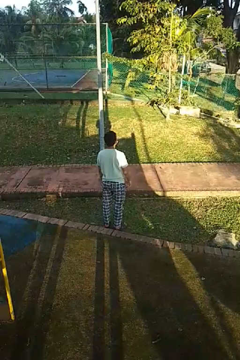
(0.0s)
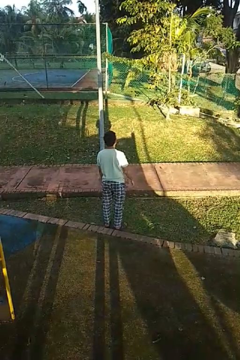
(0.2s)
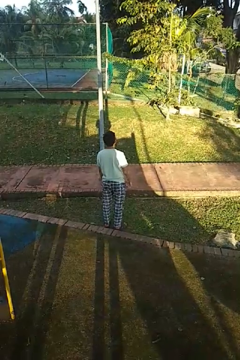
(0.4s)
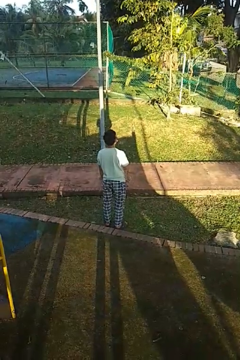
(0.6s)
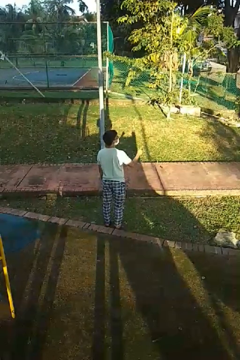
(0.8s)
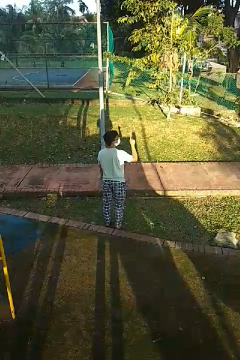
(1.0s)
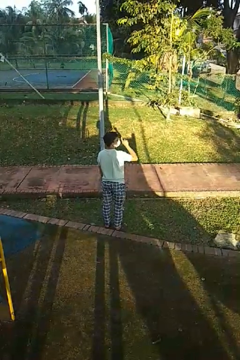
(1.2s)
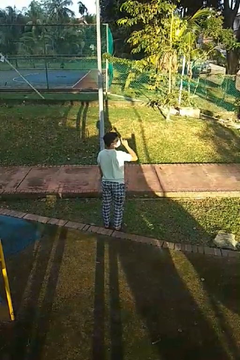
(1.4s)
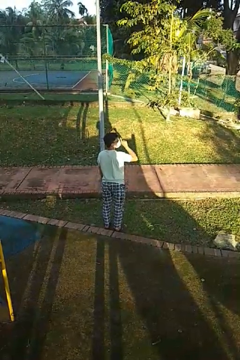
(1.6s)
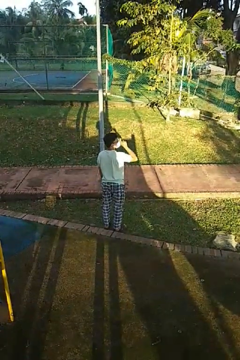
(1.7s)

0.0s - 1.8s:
person gestures be quiet

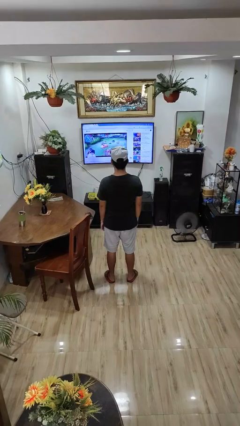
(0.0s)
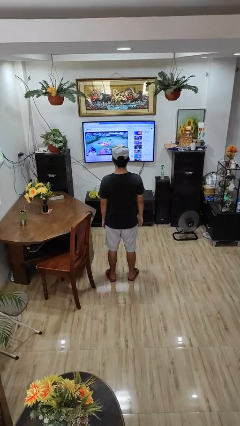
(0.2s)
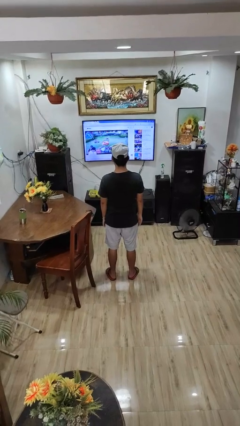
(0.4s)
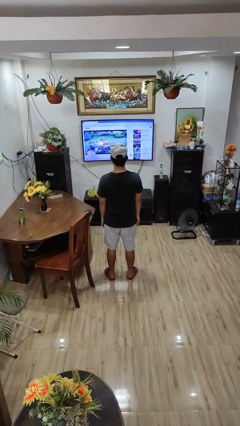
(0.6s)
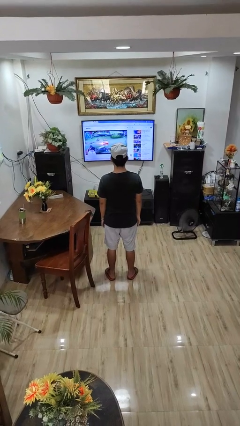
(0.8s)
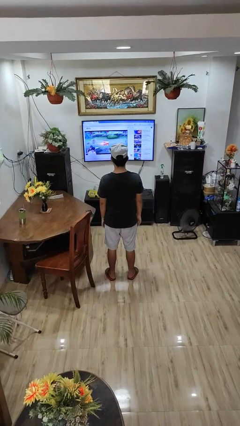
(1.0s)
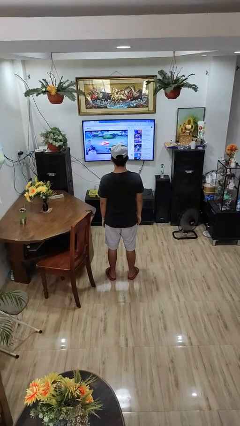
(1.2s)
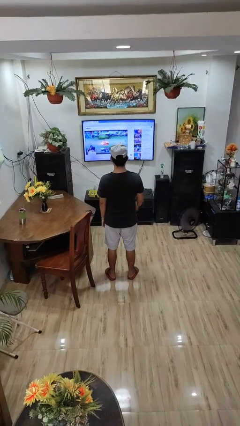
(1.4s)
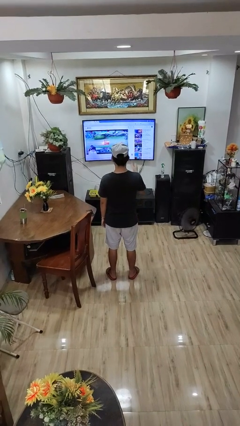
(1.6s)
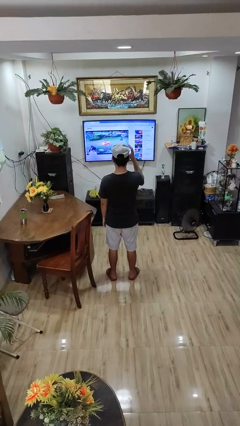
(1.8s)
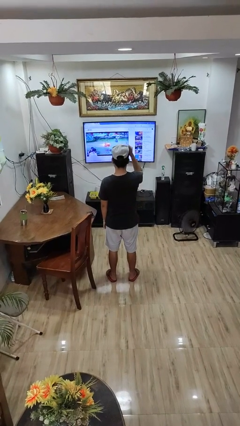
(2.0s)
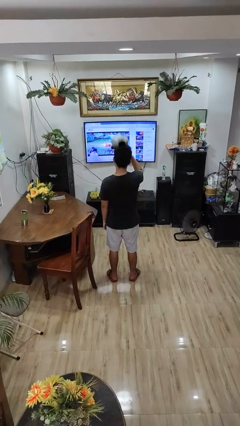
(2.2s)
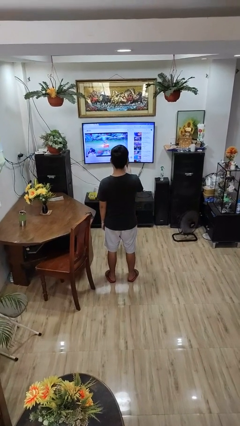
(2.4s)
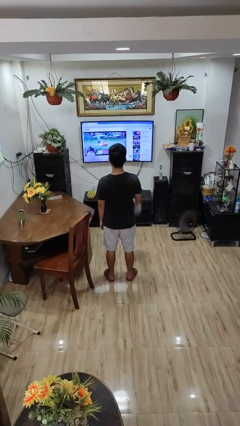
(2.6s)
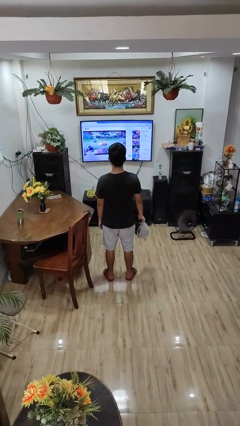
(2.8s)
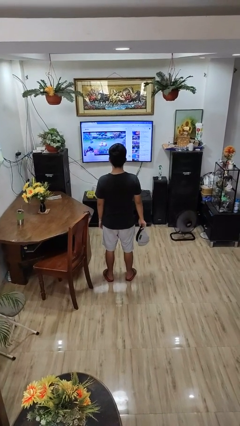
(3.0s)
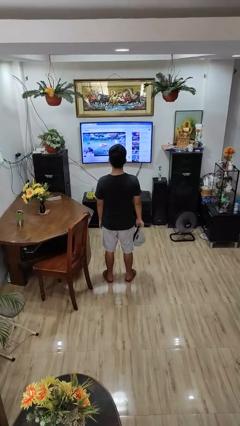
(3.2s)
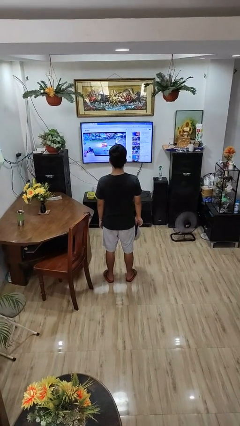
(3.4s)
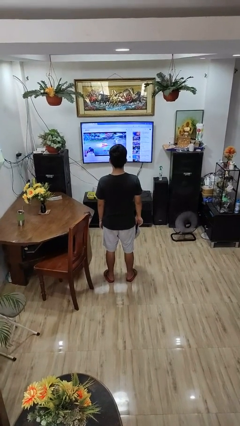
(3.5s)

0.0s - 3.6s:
person sweeps floor

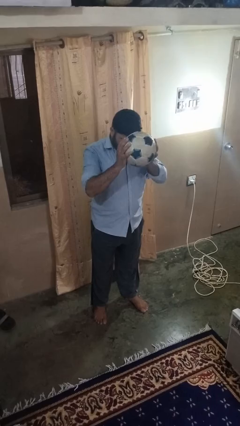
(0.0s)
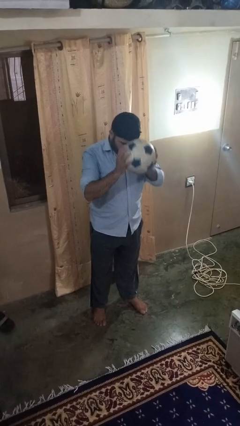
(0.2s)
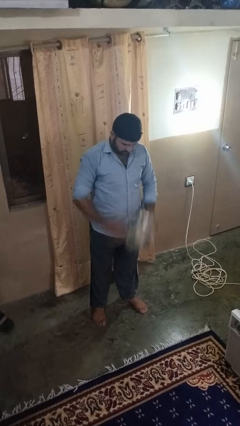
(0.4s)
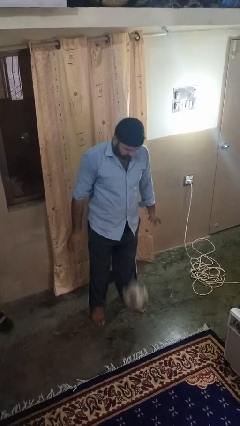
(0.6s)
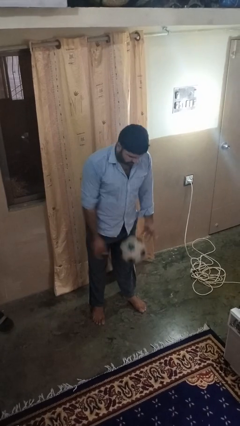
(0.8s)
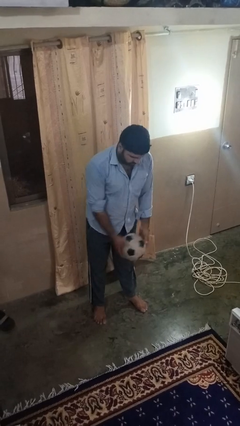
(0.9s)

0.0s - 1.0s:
person bounces ball on floor

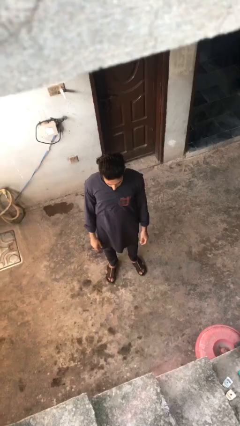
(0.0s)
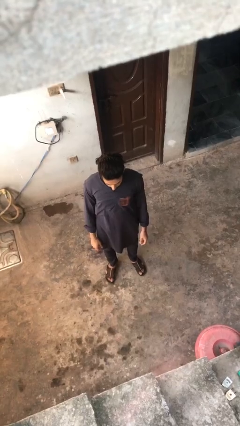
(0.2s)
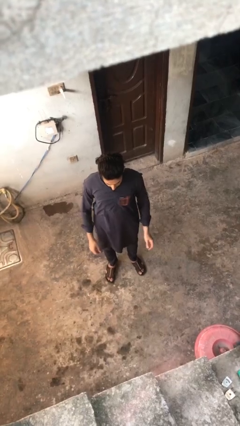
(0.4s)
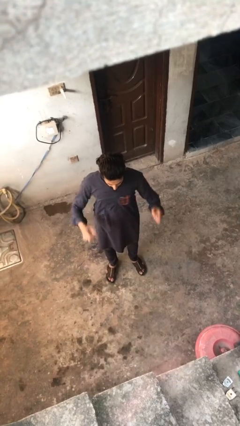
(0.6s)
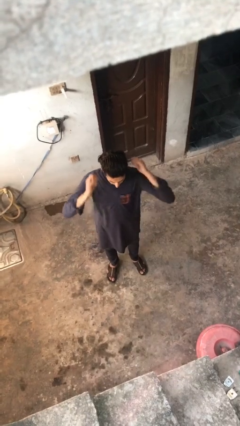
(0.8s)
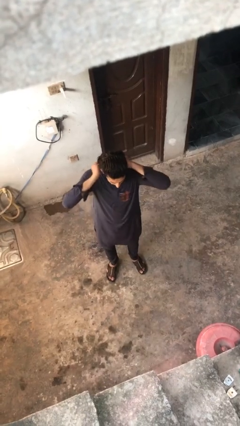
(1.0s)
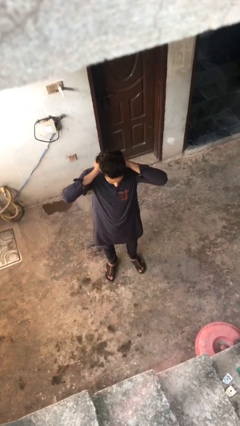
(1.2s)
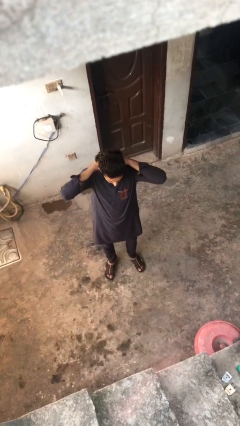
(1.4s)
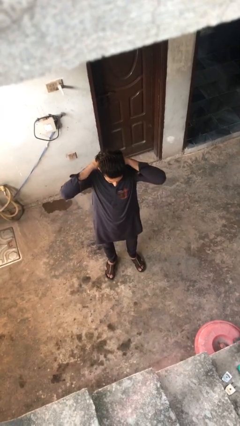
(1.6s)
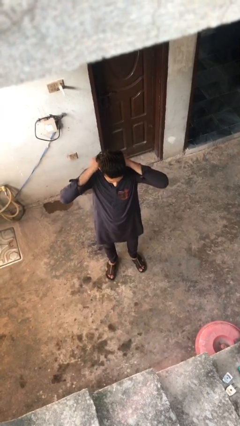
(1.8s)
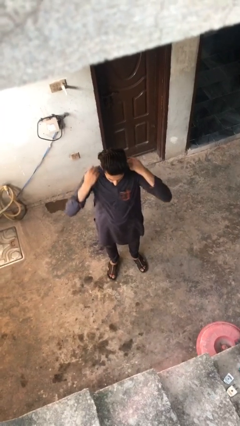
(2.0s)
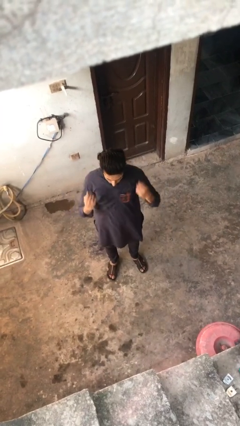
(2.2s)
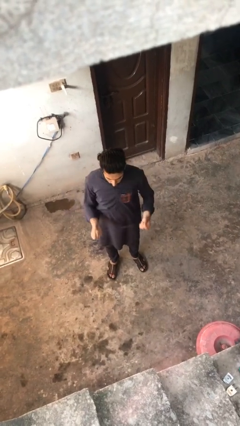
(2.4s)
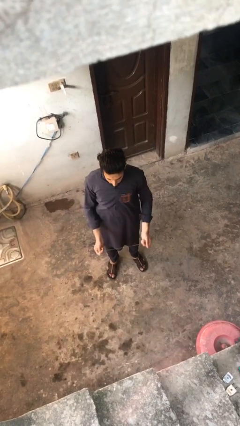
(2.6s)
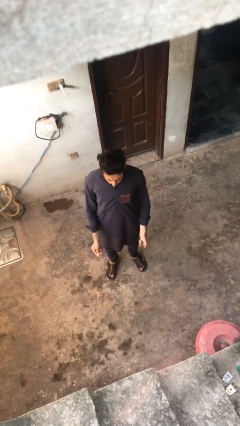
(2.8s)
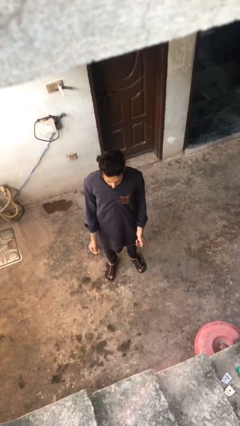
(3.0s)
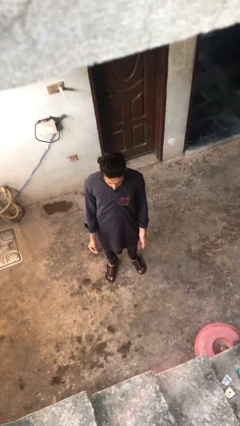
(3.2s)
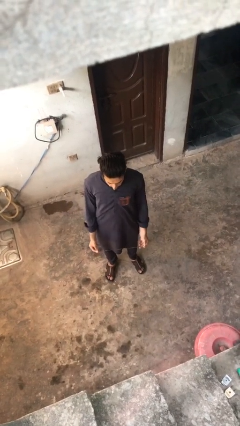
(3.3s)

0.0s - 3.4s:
person takes off necklace

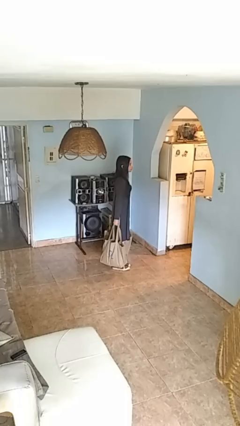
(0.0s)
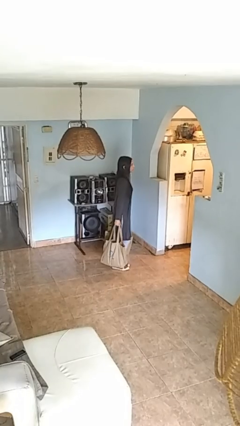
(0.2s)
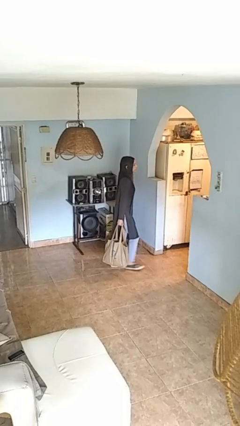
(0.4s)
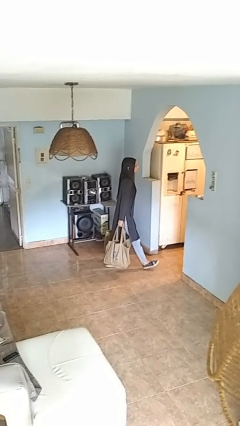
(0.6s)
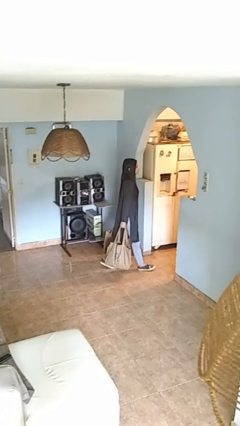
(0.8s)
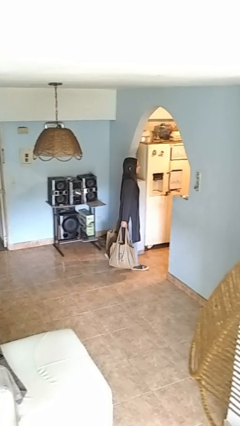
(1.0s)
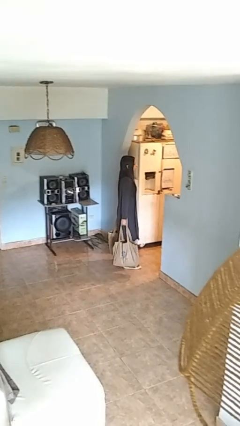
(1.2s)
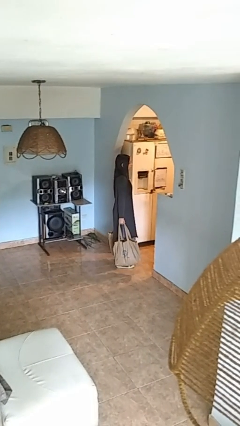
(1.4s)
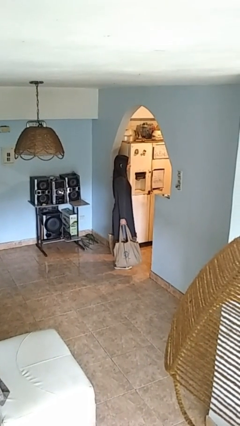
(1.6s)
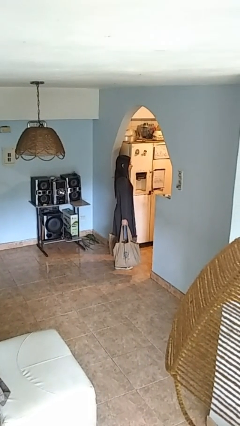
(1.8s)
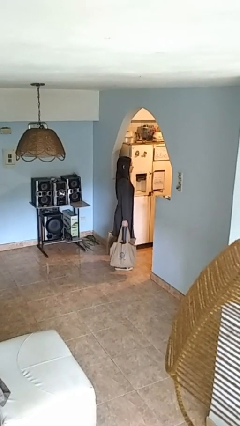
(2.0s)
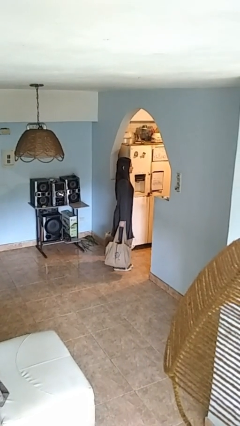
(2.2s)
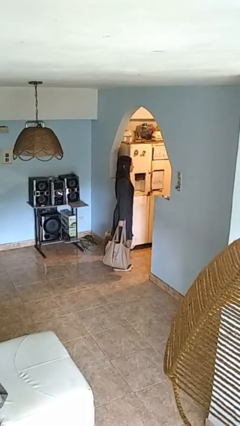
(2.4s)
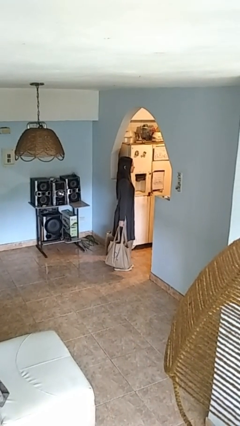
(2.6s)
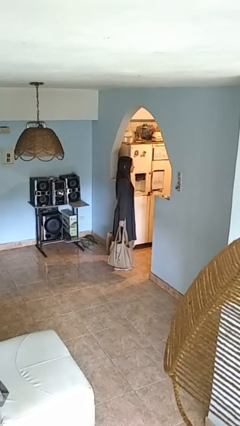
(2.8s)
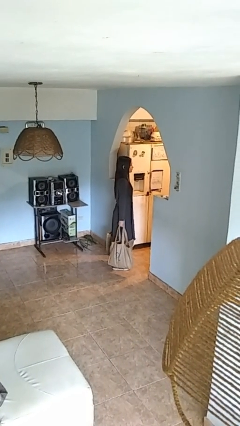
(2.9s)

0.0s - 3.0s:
person carries groceries

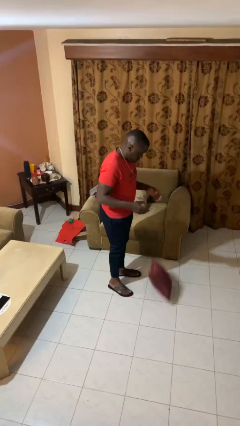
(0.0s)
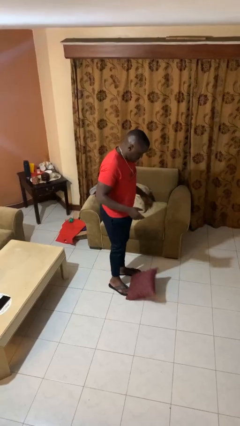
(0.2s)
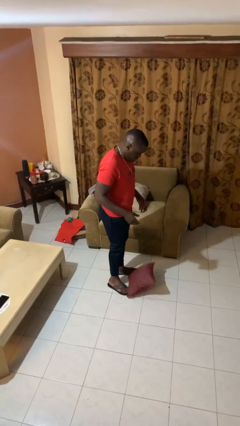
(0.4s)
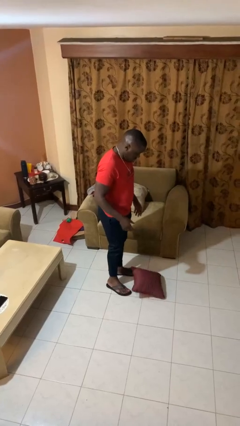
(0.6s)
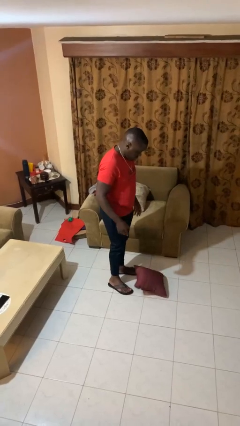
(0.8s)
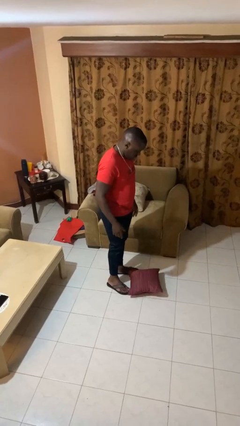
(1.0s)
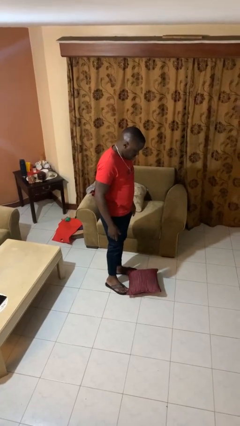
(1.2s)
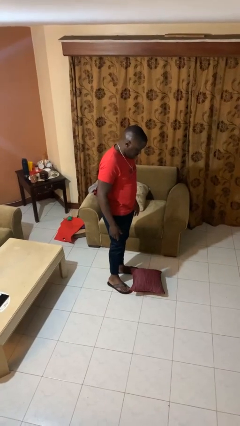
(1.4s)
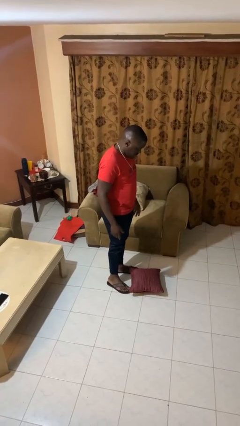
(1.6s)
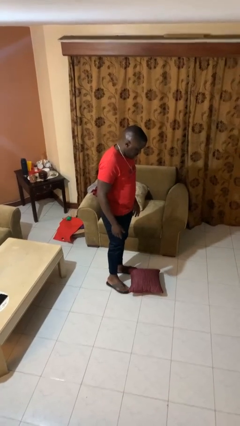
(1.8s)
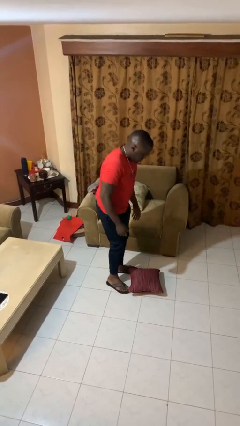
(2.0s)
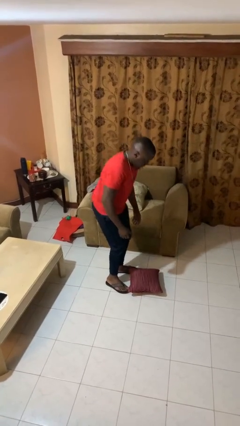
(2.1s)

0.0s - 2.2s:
person drops object

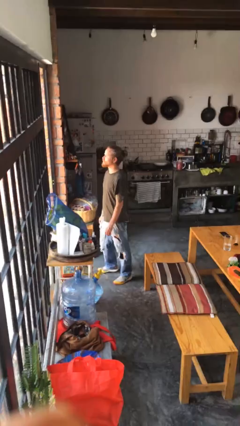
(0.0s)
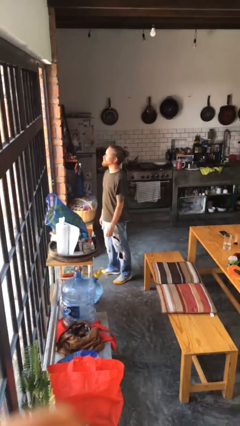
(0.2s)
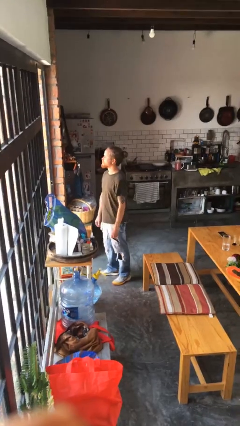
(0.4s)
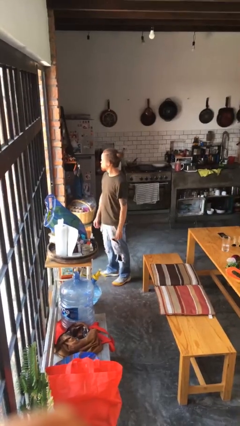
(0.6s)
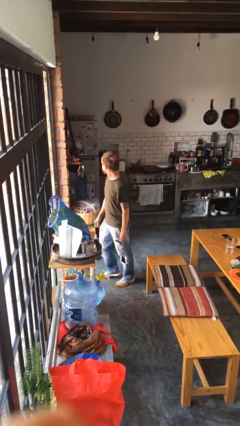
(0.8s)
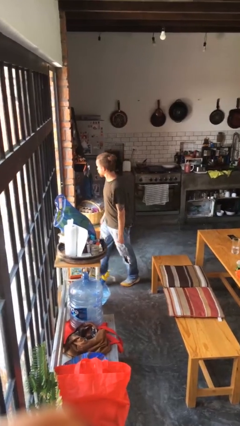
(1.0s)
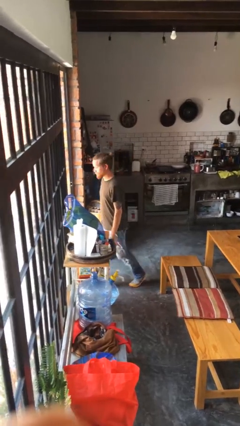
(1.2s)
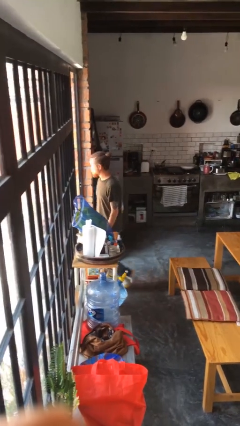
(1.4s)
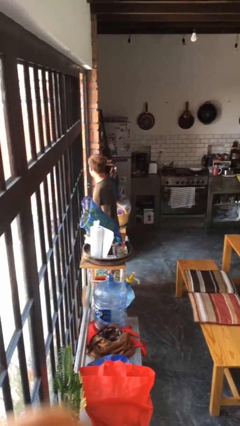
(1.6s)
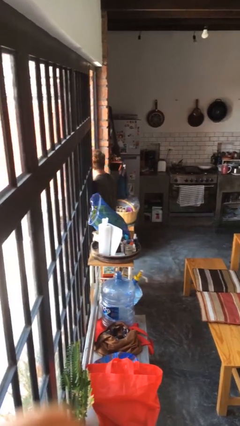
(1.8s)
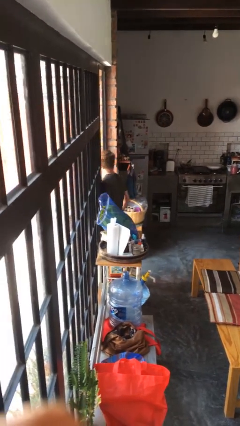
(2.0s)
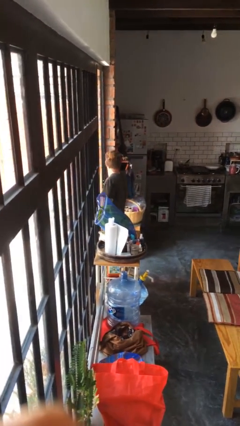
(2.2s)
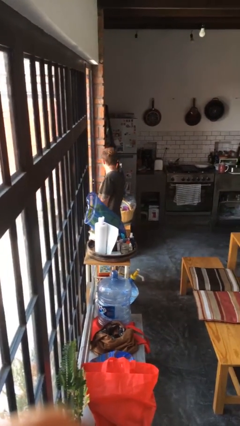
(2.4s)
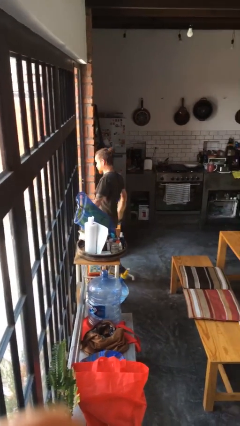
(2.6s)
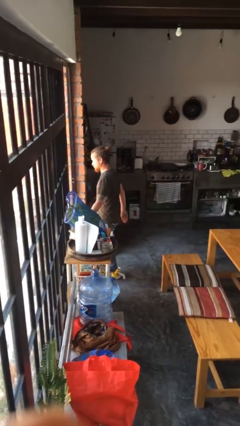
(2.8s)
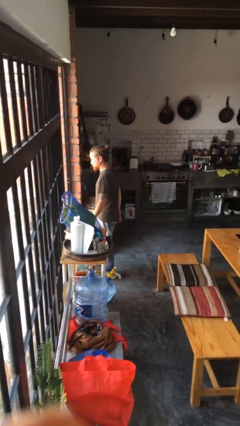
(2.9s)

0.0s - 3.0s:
person bumps into wall
